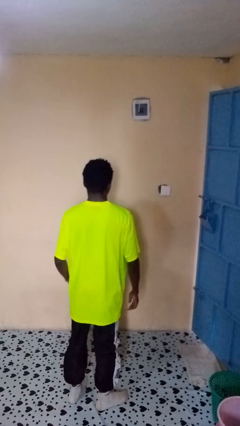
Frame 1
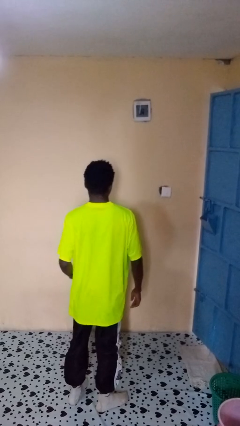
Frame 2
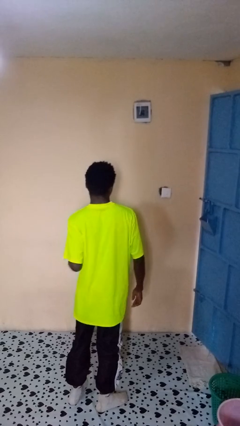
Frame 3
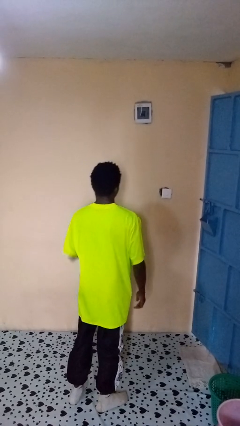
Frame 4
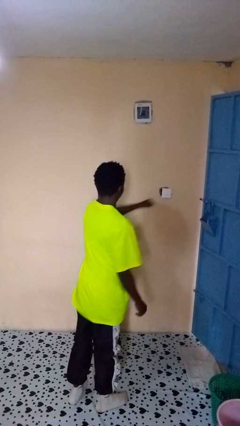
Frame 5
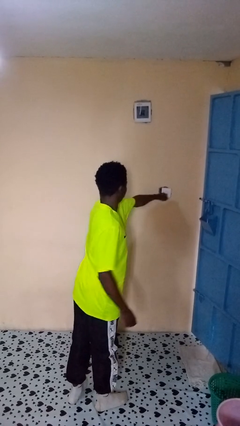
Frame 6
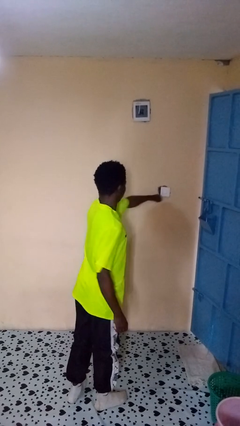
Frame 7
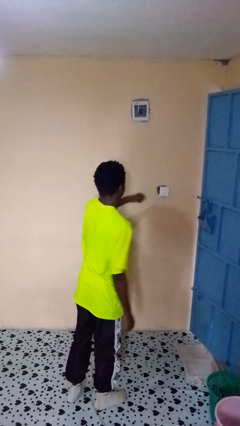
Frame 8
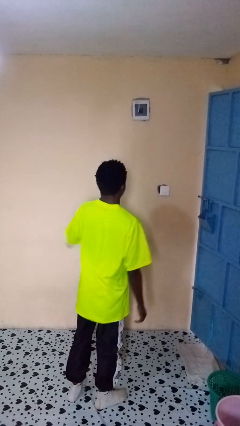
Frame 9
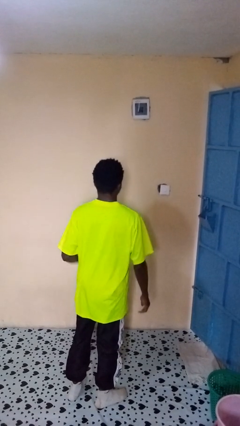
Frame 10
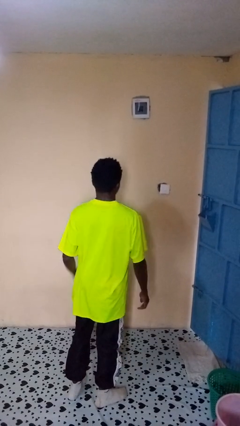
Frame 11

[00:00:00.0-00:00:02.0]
person karate chop

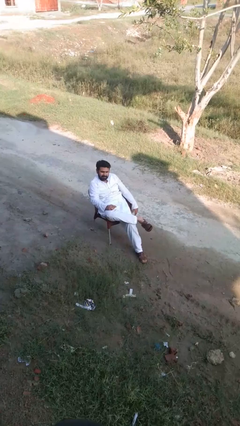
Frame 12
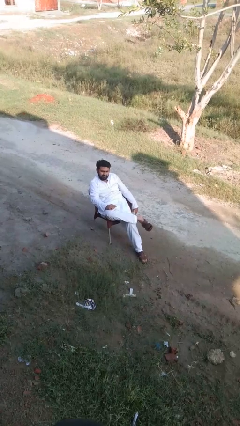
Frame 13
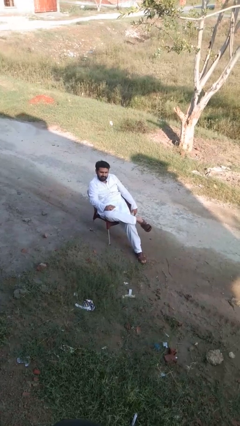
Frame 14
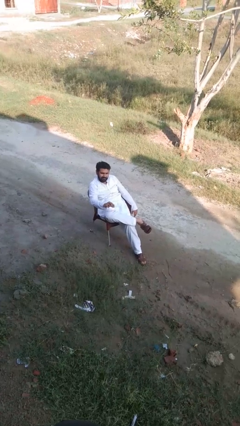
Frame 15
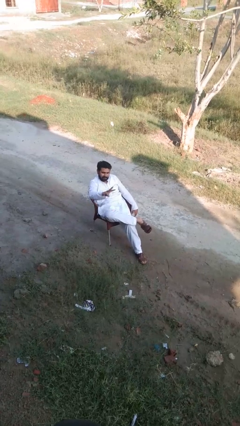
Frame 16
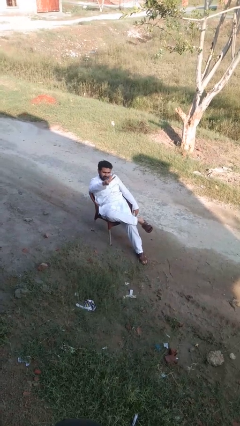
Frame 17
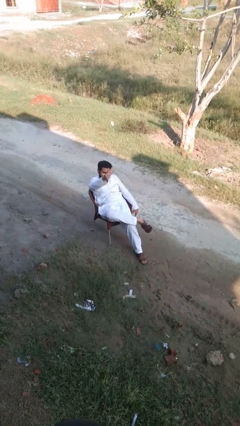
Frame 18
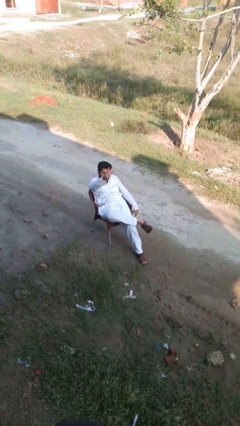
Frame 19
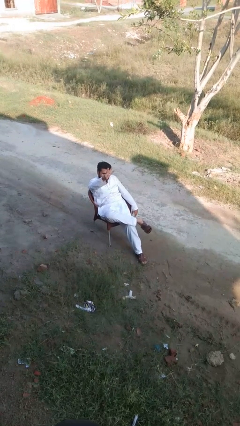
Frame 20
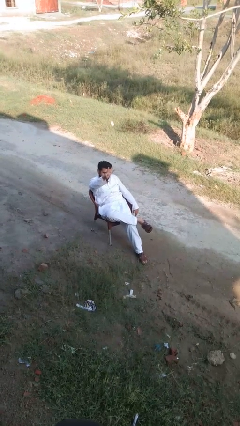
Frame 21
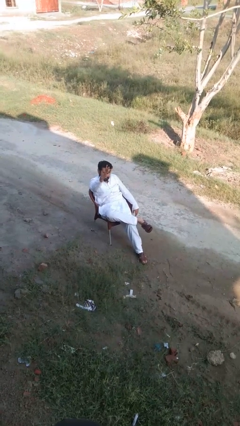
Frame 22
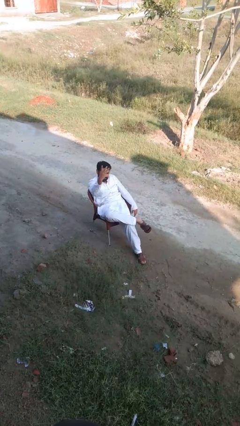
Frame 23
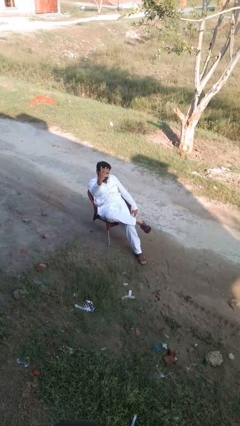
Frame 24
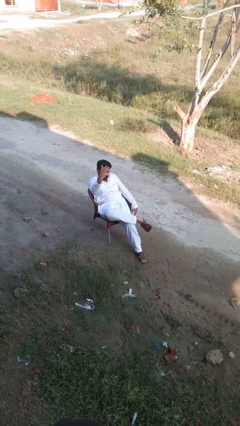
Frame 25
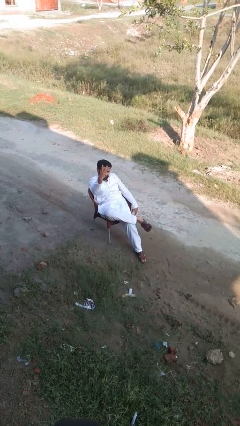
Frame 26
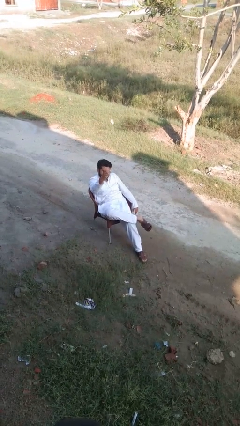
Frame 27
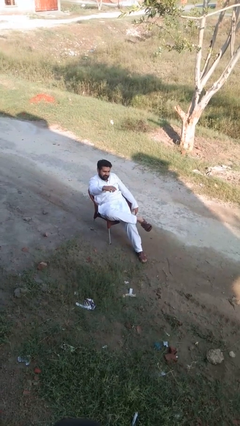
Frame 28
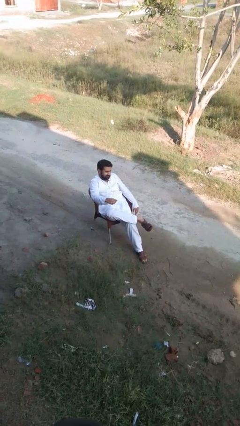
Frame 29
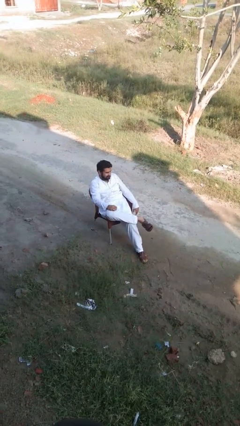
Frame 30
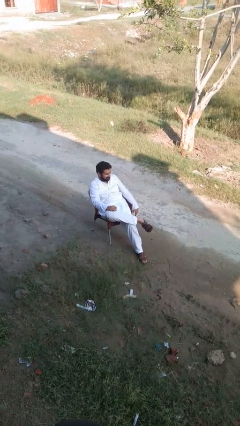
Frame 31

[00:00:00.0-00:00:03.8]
person gestures number three

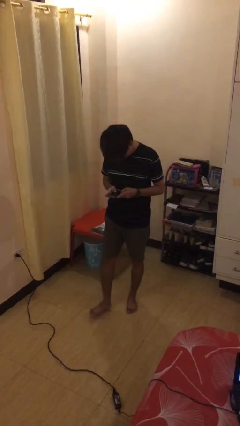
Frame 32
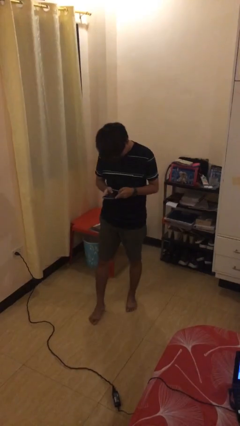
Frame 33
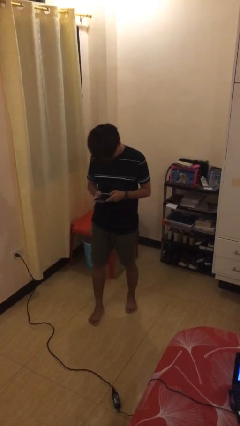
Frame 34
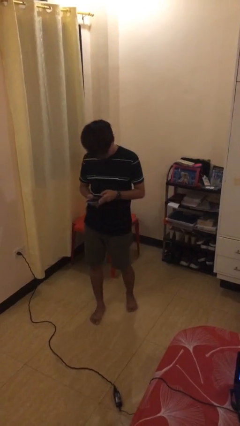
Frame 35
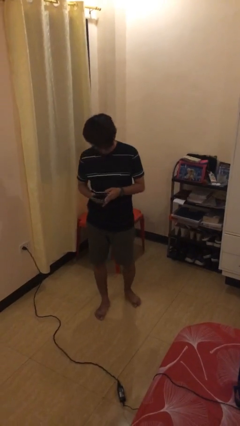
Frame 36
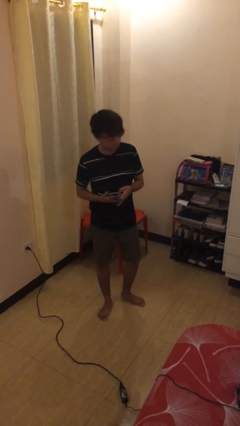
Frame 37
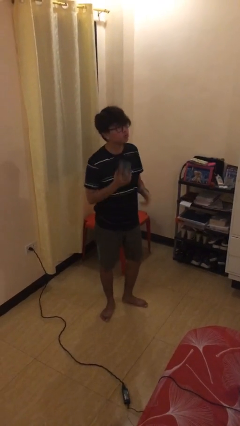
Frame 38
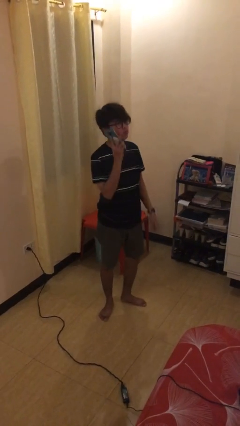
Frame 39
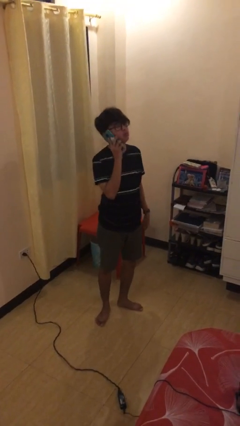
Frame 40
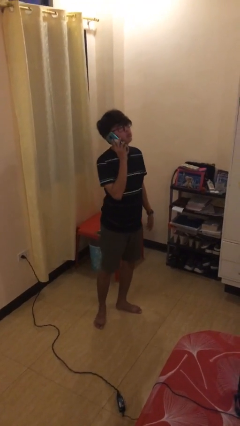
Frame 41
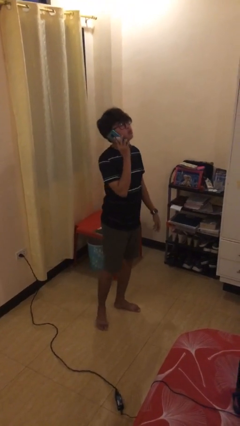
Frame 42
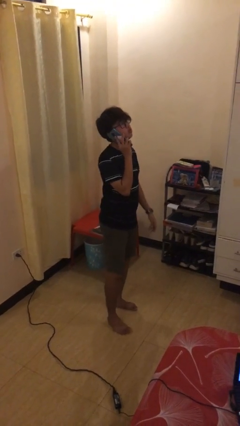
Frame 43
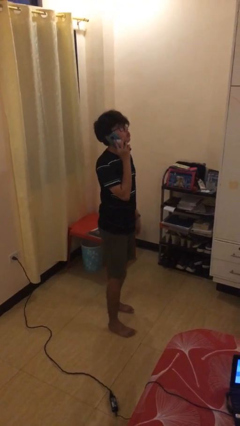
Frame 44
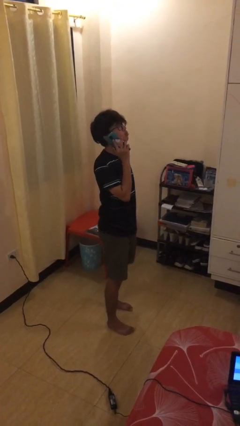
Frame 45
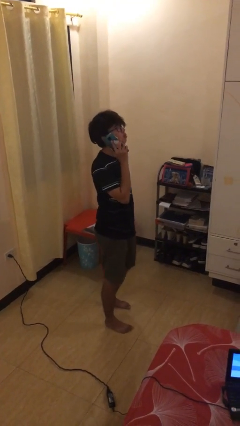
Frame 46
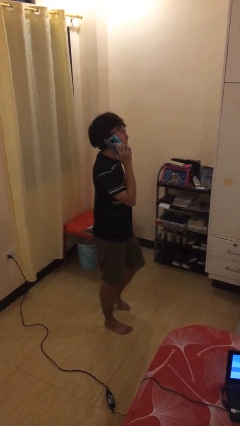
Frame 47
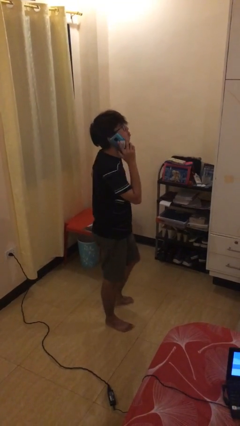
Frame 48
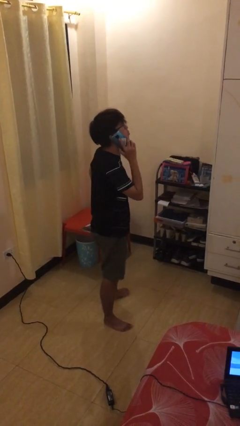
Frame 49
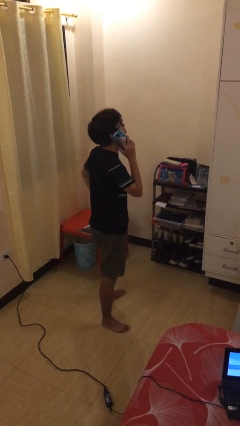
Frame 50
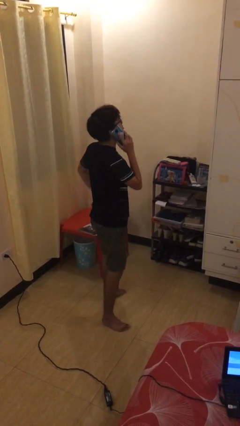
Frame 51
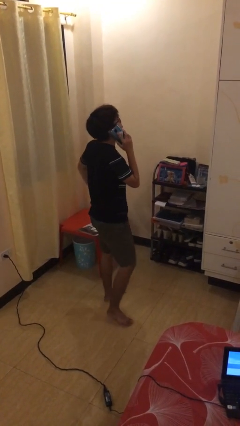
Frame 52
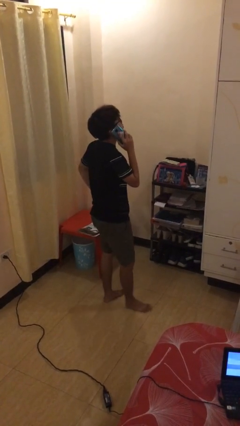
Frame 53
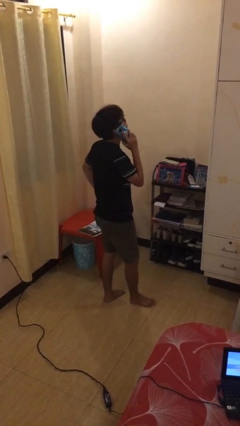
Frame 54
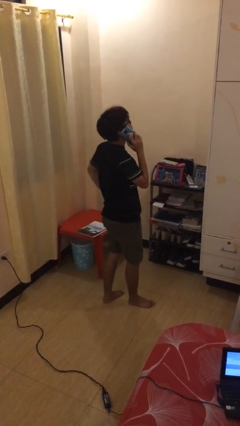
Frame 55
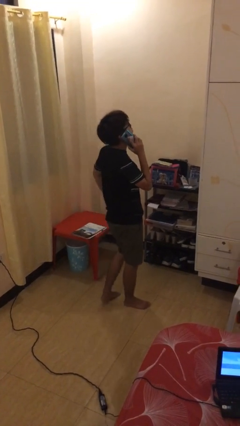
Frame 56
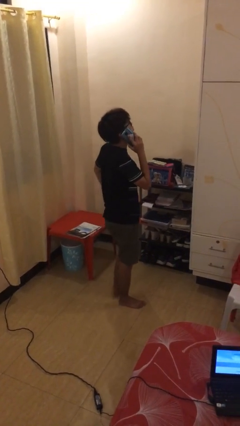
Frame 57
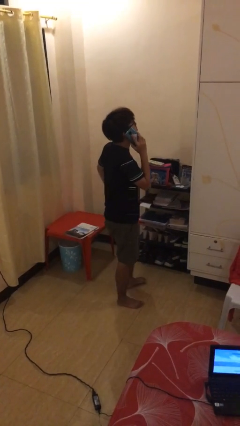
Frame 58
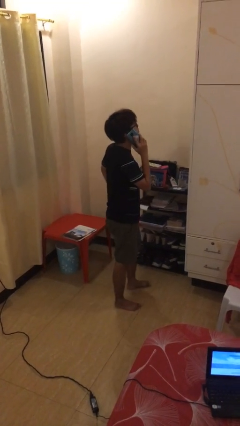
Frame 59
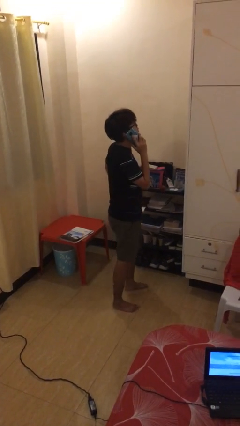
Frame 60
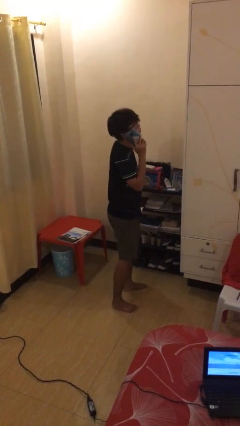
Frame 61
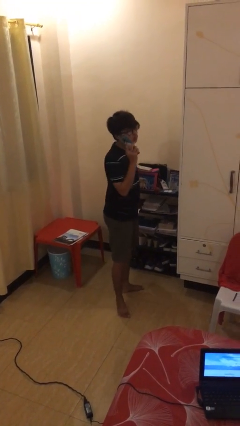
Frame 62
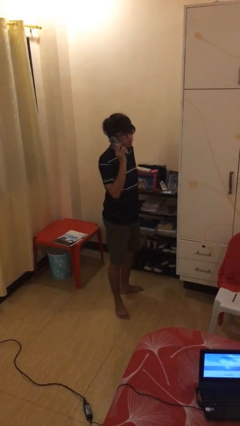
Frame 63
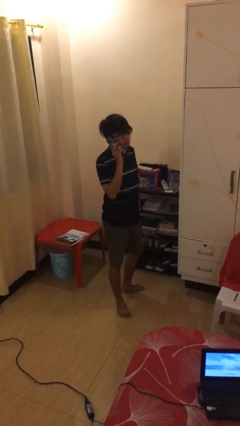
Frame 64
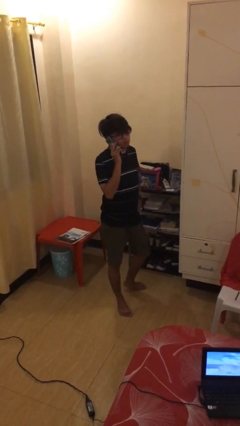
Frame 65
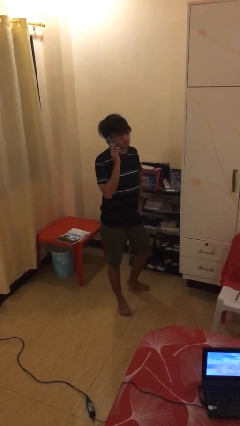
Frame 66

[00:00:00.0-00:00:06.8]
person talks on phone

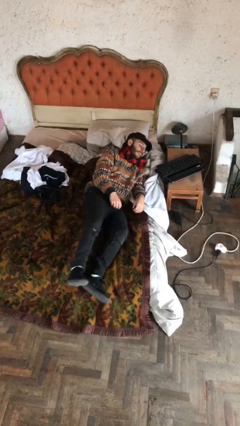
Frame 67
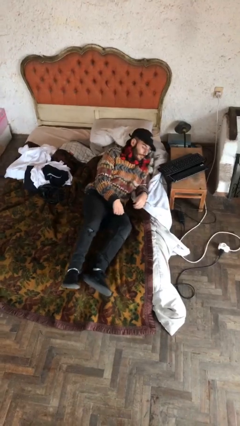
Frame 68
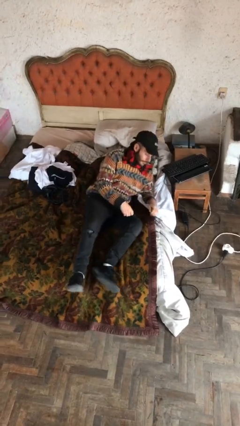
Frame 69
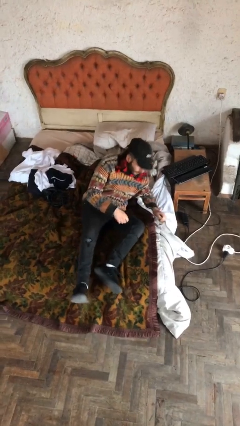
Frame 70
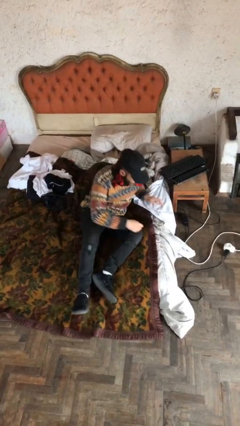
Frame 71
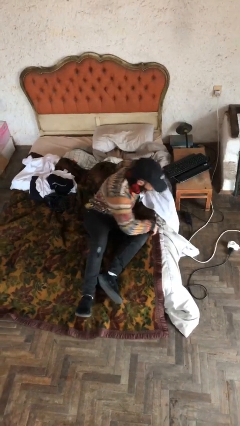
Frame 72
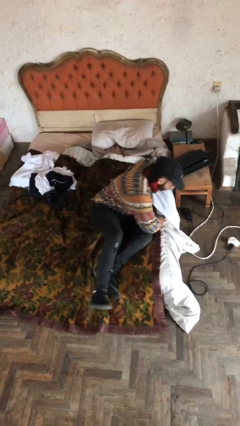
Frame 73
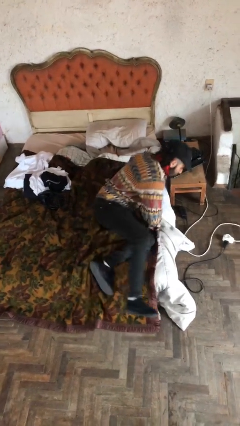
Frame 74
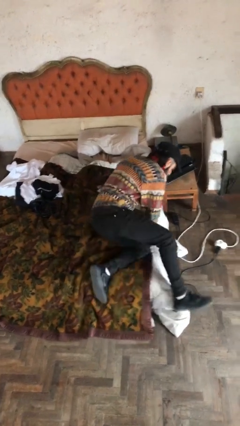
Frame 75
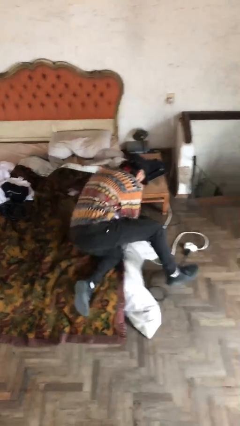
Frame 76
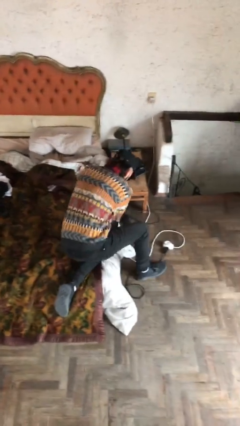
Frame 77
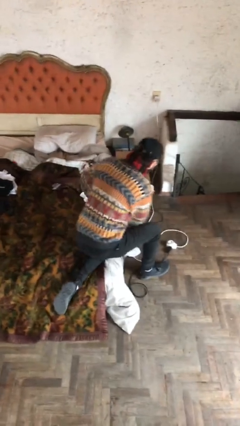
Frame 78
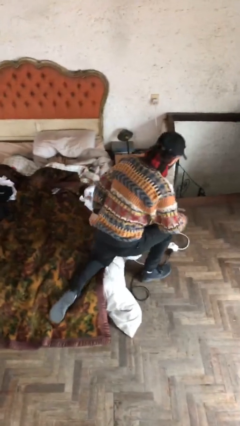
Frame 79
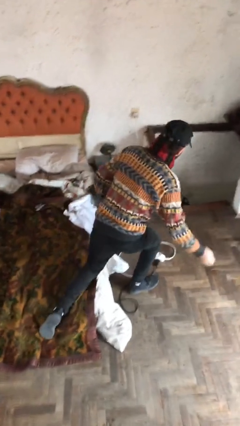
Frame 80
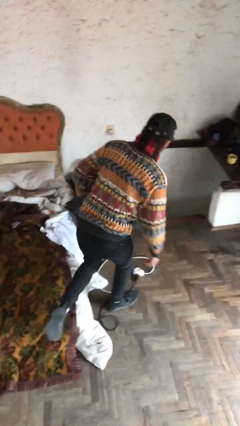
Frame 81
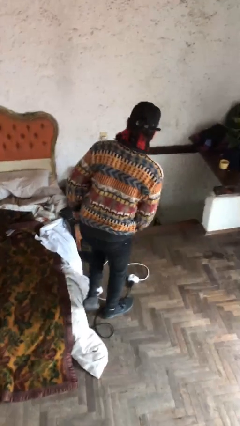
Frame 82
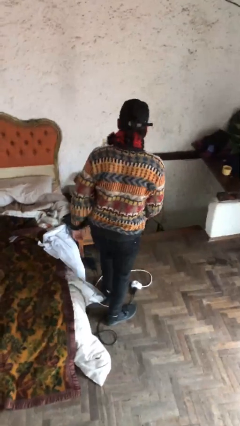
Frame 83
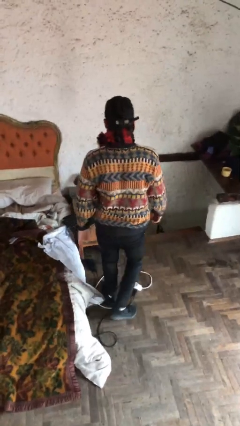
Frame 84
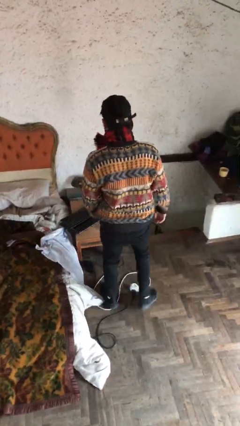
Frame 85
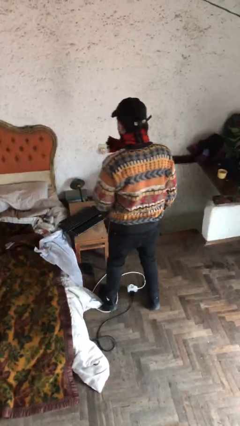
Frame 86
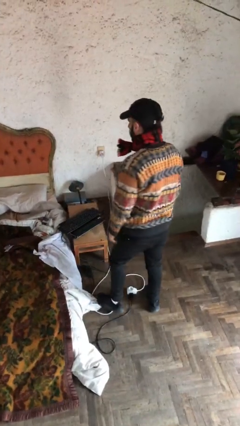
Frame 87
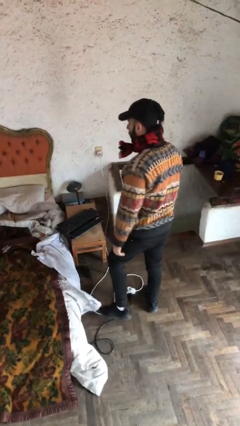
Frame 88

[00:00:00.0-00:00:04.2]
person stands up

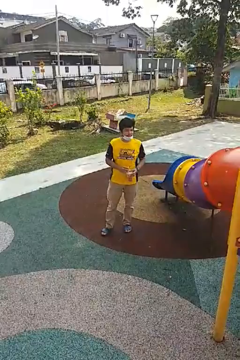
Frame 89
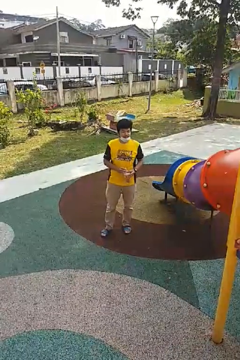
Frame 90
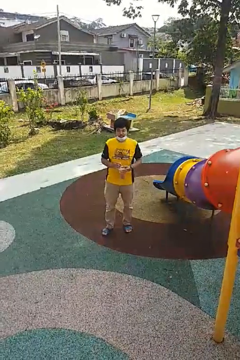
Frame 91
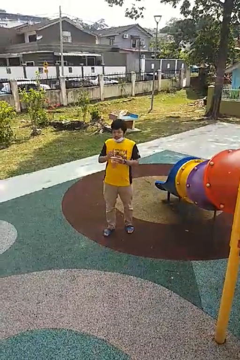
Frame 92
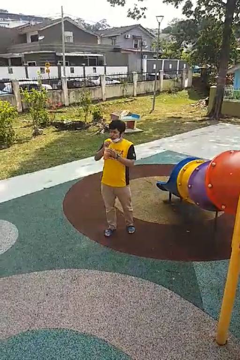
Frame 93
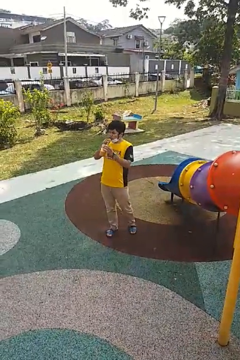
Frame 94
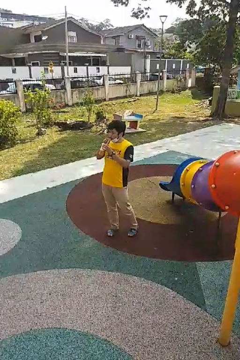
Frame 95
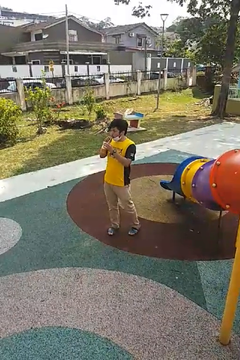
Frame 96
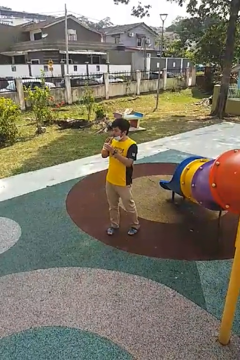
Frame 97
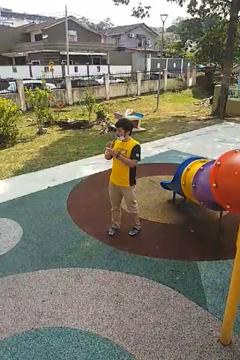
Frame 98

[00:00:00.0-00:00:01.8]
person drinks from straw
